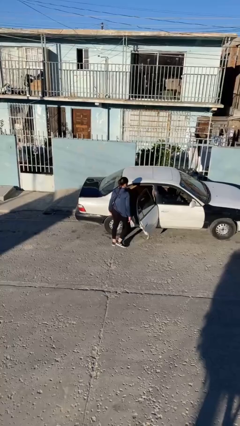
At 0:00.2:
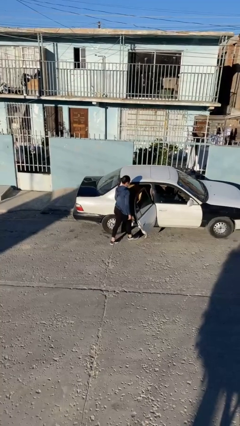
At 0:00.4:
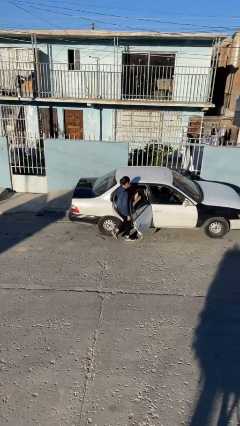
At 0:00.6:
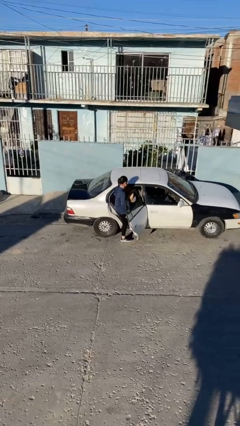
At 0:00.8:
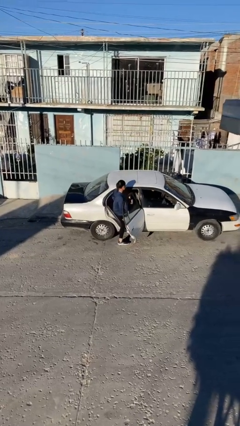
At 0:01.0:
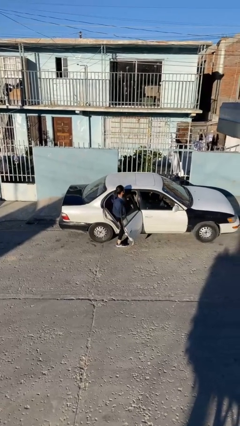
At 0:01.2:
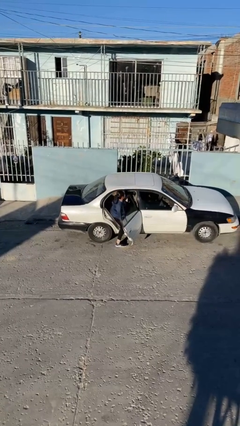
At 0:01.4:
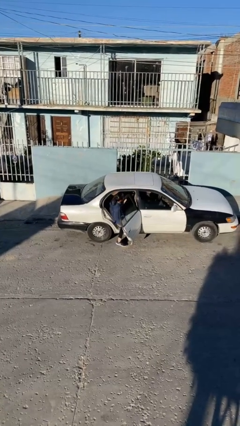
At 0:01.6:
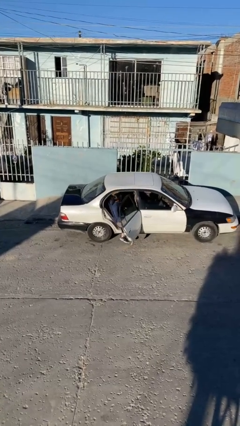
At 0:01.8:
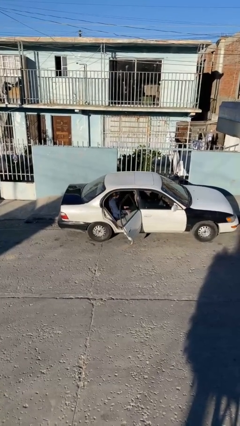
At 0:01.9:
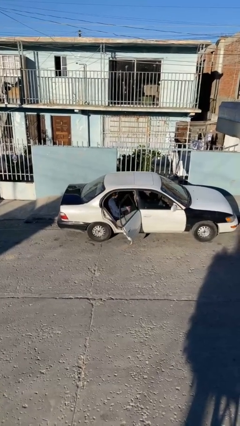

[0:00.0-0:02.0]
person enters car

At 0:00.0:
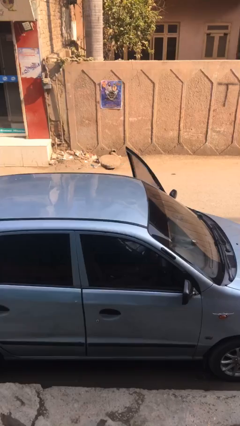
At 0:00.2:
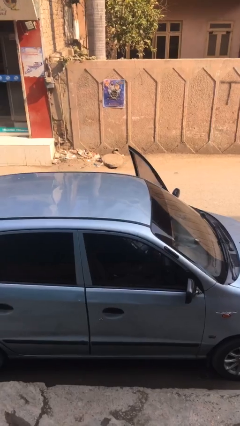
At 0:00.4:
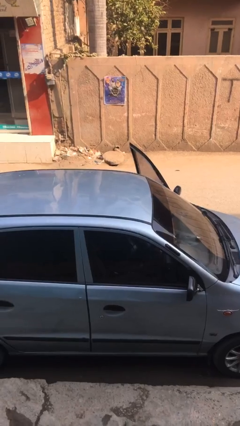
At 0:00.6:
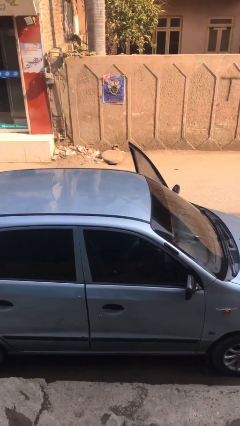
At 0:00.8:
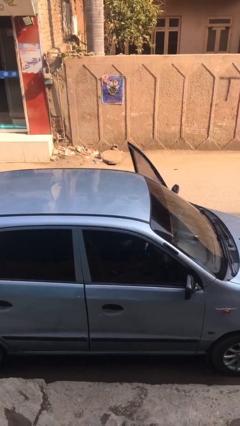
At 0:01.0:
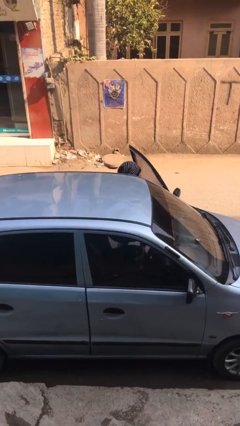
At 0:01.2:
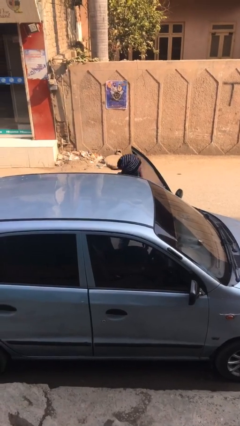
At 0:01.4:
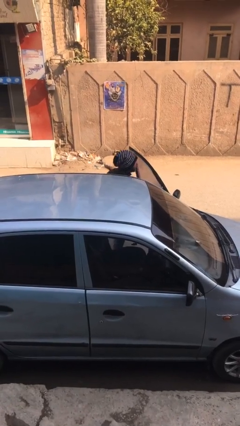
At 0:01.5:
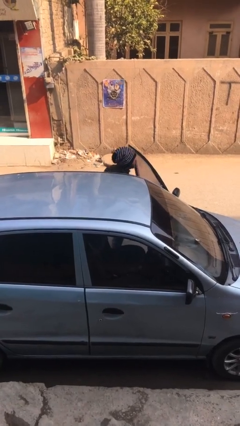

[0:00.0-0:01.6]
person exits car

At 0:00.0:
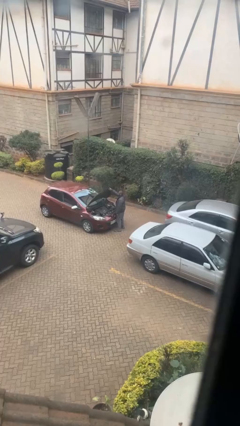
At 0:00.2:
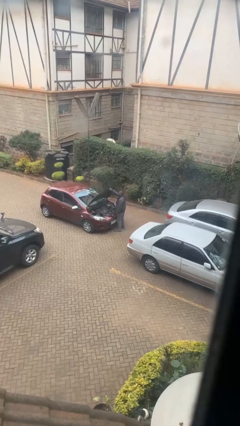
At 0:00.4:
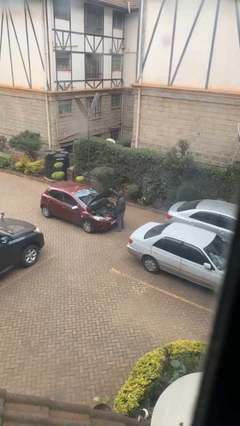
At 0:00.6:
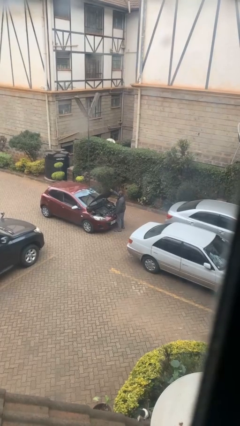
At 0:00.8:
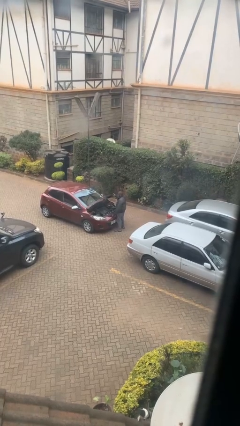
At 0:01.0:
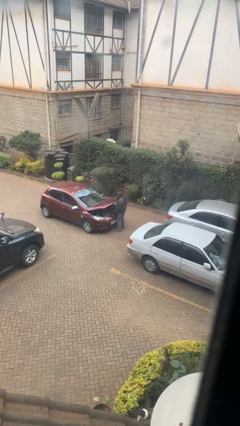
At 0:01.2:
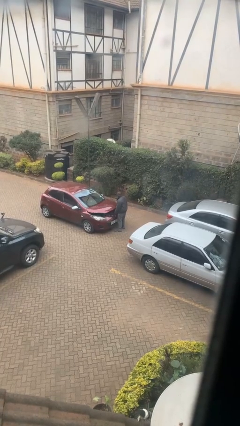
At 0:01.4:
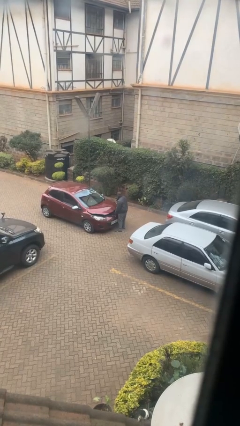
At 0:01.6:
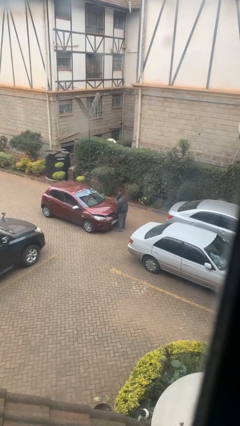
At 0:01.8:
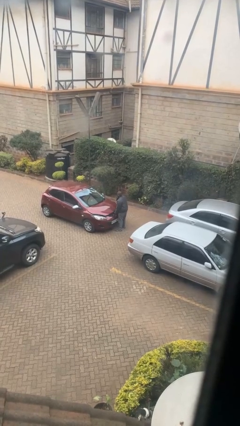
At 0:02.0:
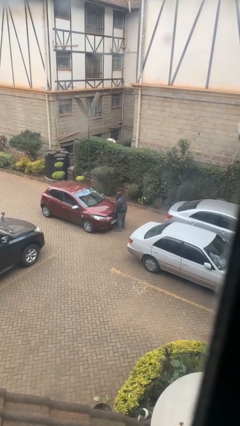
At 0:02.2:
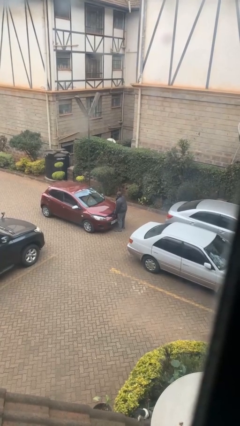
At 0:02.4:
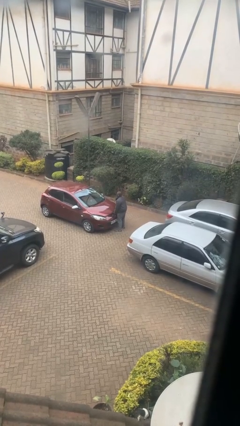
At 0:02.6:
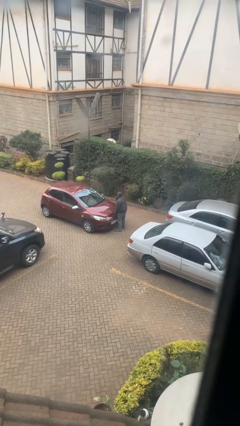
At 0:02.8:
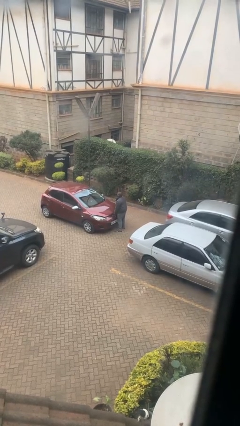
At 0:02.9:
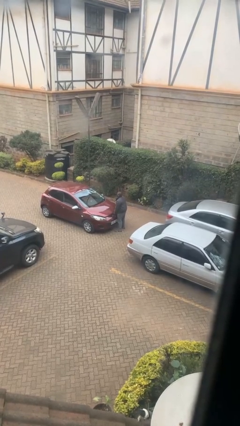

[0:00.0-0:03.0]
person closes car hood

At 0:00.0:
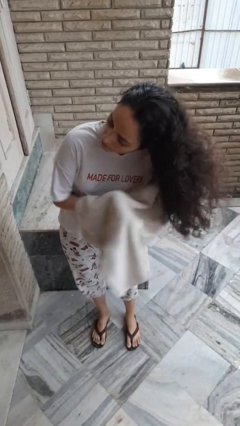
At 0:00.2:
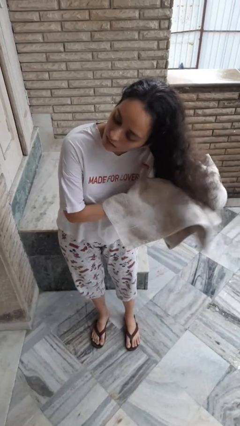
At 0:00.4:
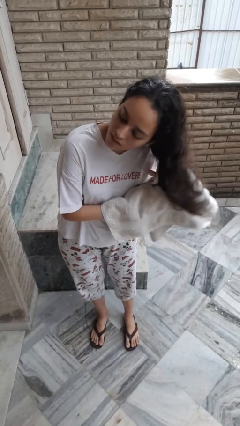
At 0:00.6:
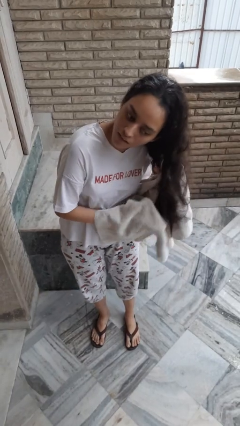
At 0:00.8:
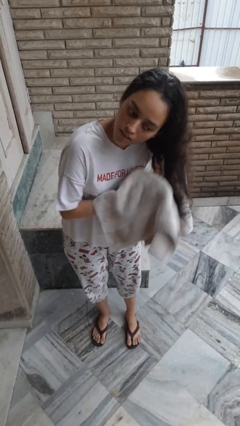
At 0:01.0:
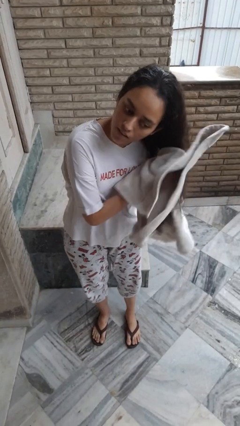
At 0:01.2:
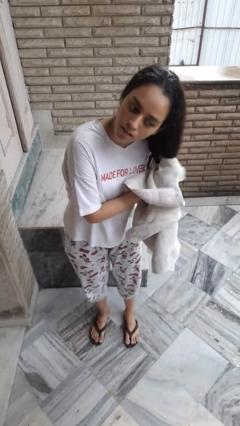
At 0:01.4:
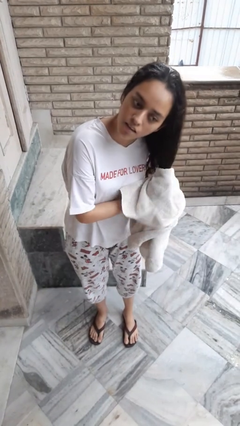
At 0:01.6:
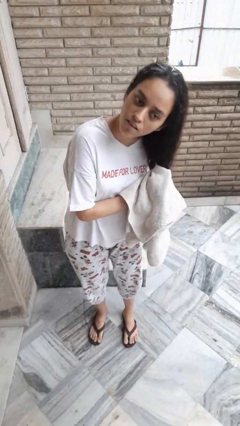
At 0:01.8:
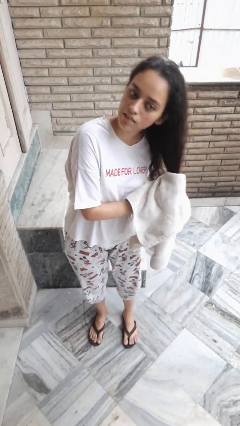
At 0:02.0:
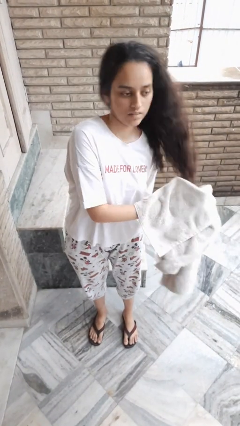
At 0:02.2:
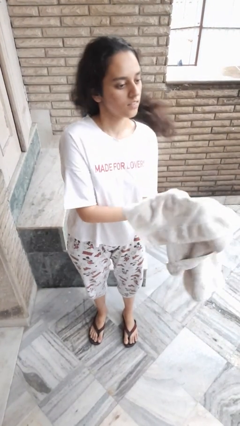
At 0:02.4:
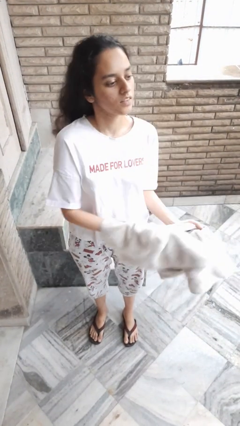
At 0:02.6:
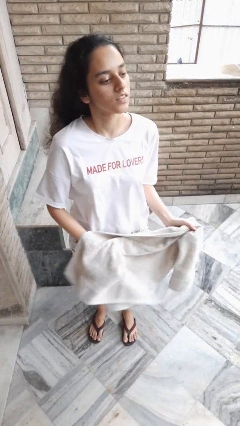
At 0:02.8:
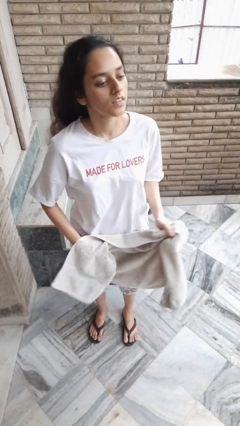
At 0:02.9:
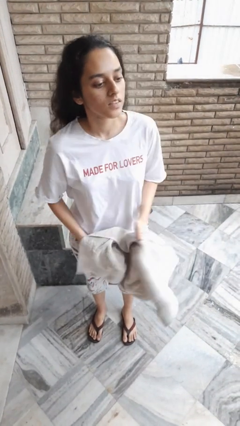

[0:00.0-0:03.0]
person dries hair with towel

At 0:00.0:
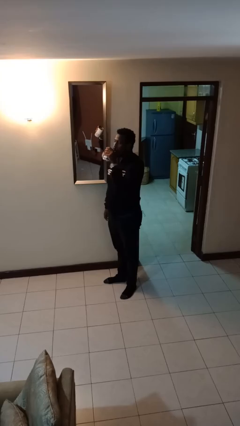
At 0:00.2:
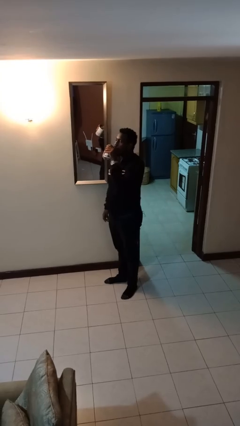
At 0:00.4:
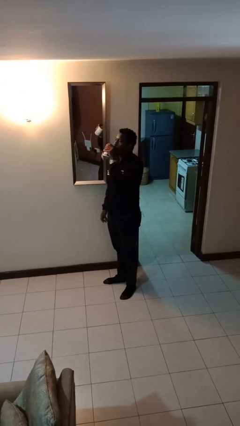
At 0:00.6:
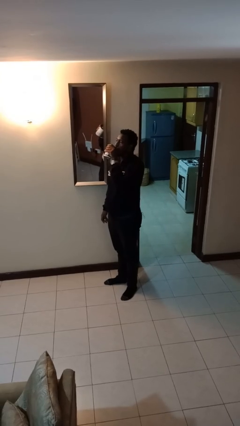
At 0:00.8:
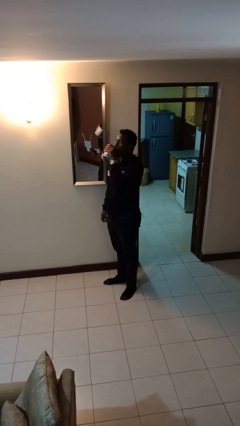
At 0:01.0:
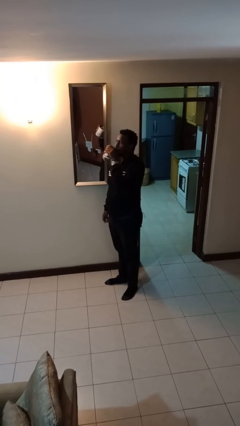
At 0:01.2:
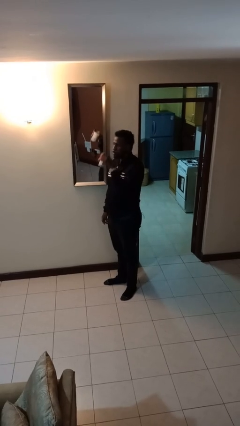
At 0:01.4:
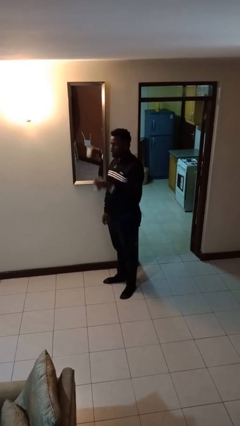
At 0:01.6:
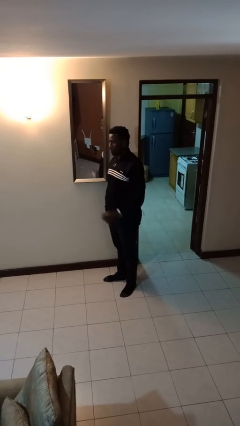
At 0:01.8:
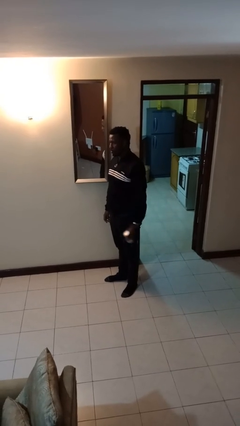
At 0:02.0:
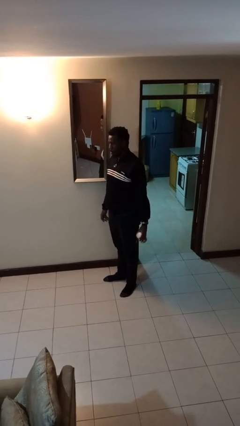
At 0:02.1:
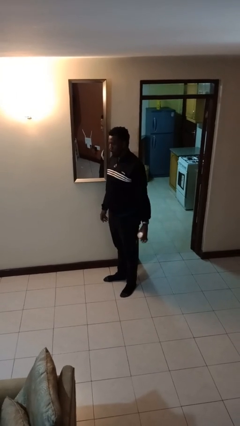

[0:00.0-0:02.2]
person drinks from beverage can

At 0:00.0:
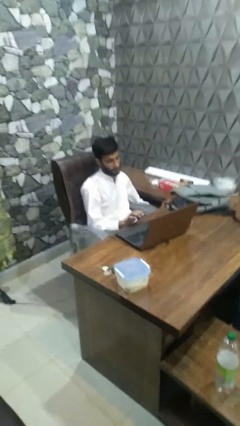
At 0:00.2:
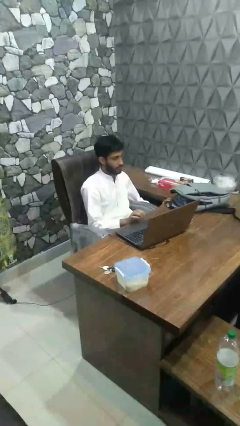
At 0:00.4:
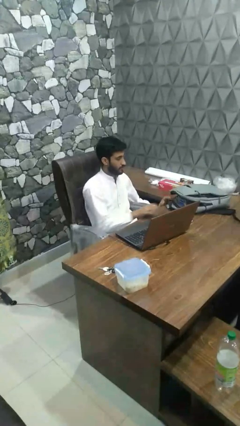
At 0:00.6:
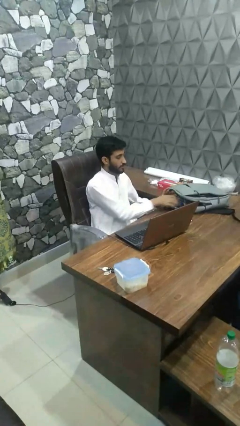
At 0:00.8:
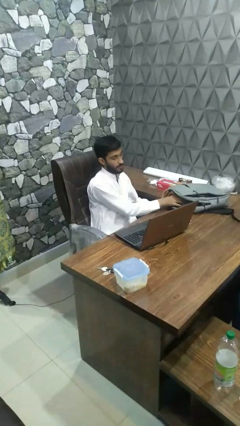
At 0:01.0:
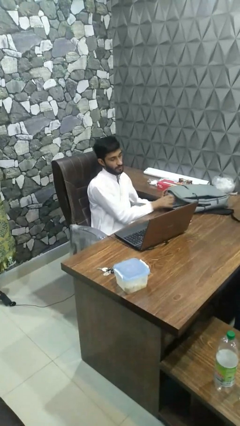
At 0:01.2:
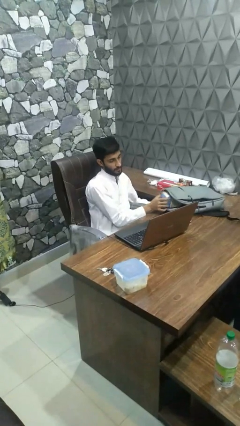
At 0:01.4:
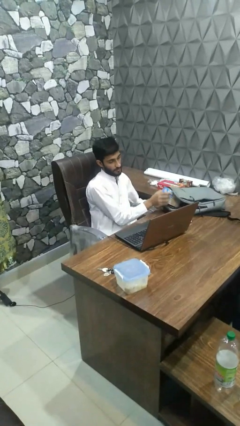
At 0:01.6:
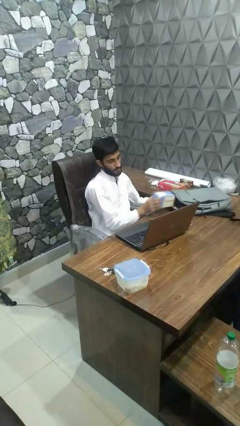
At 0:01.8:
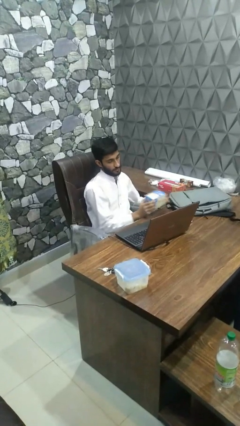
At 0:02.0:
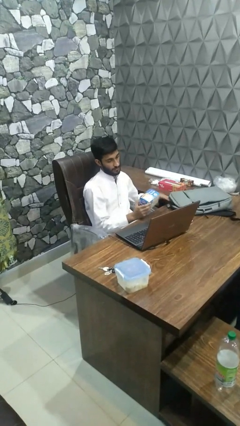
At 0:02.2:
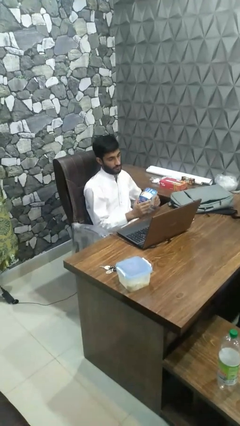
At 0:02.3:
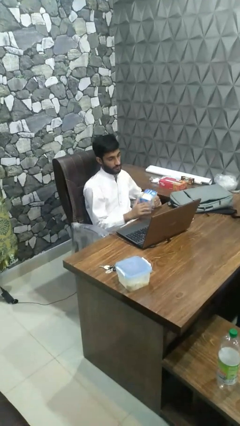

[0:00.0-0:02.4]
person takes object from bag

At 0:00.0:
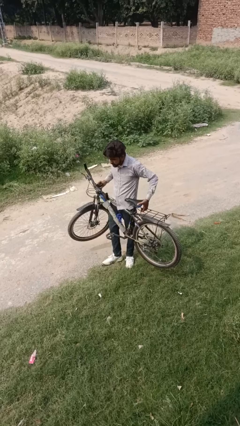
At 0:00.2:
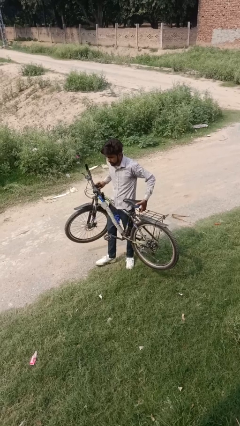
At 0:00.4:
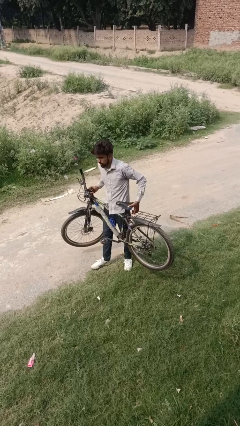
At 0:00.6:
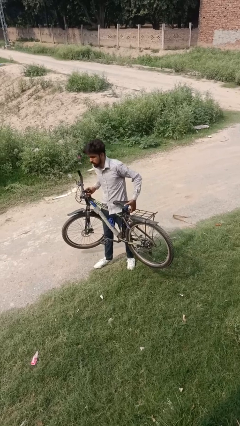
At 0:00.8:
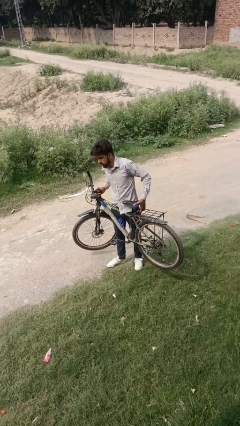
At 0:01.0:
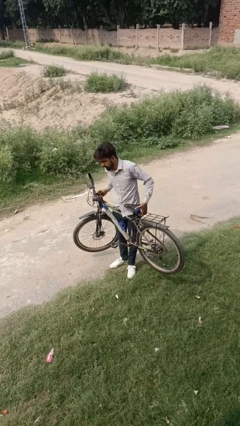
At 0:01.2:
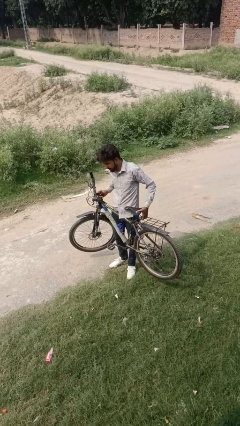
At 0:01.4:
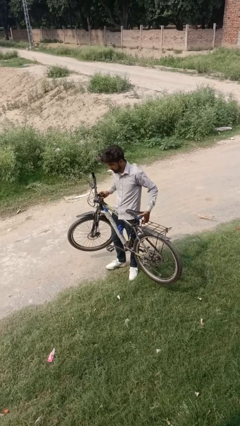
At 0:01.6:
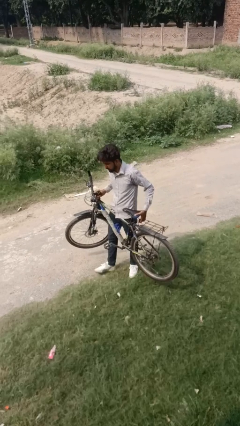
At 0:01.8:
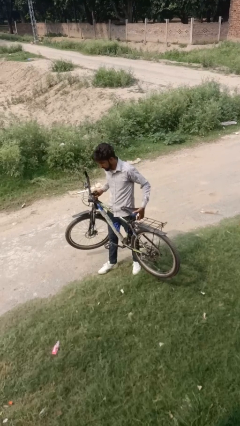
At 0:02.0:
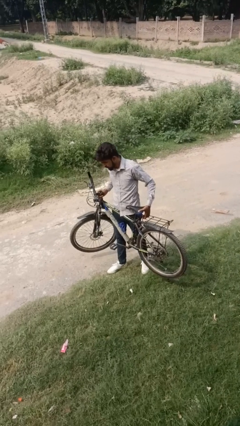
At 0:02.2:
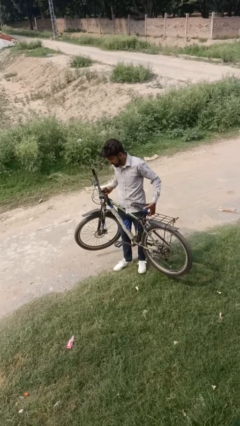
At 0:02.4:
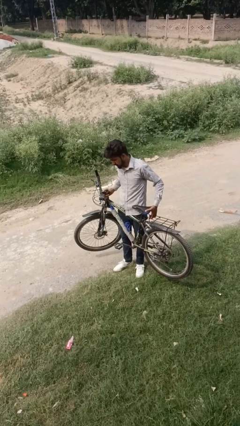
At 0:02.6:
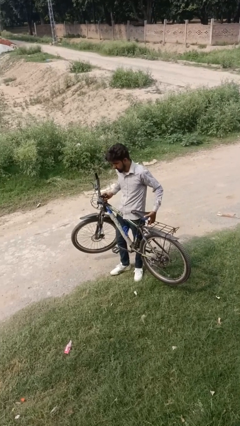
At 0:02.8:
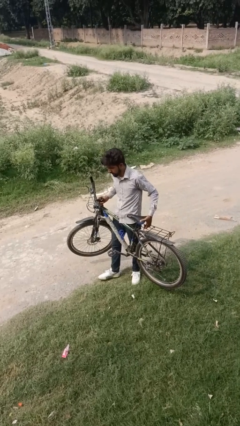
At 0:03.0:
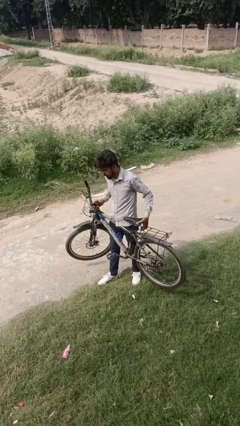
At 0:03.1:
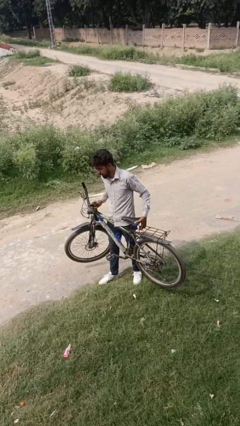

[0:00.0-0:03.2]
person carries bicycle
